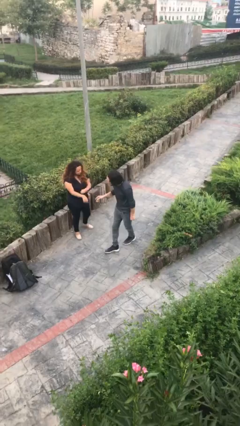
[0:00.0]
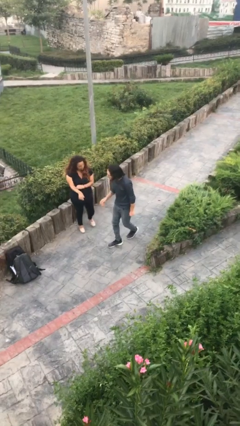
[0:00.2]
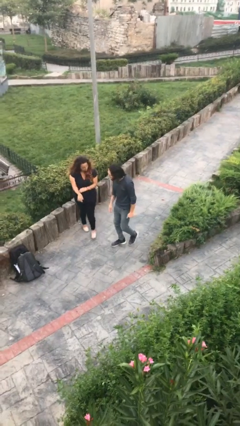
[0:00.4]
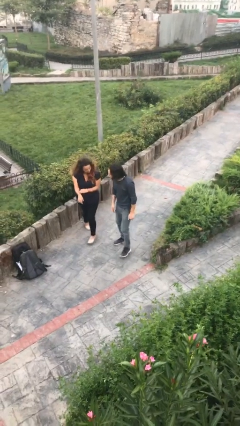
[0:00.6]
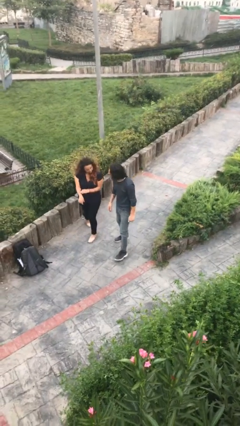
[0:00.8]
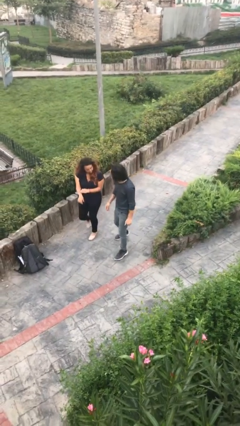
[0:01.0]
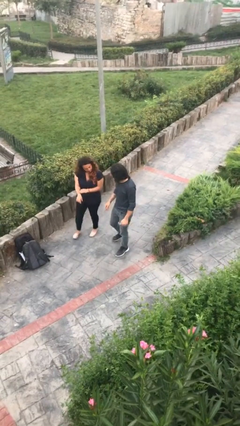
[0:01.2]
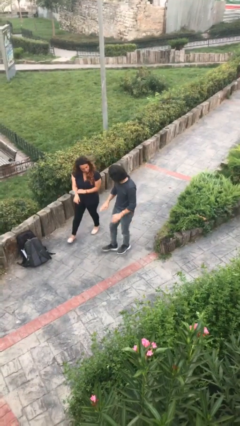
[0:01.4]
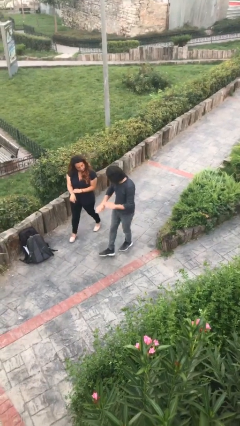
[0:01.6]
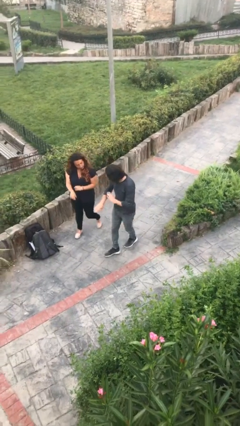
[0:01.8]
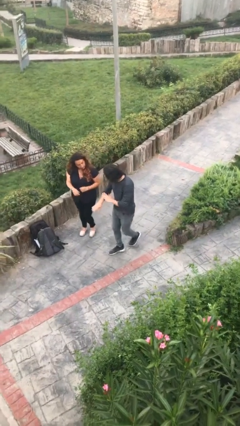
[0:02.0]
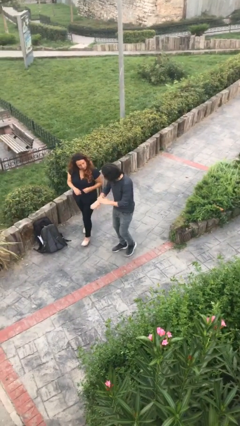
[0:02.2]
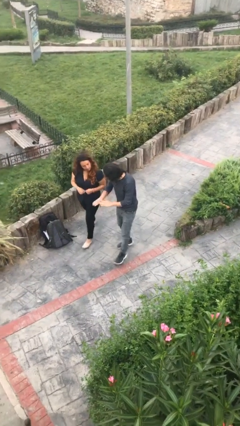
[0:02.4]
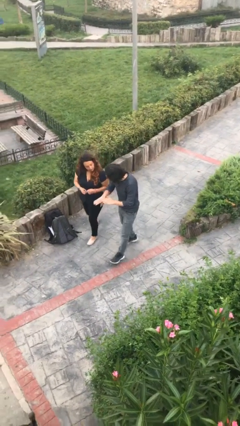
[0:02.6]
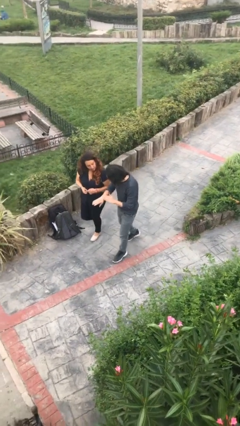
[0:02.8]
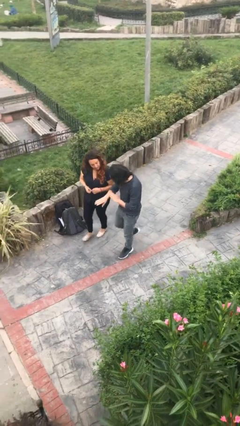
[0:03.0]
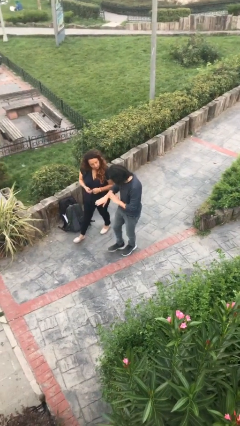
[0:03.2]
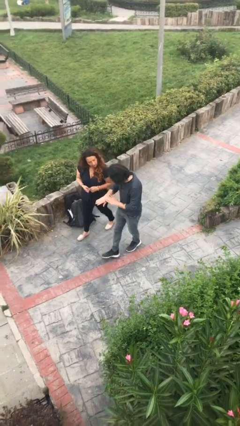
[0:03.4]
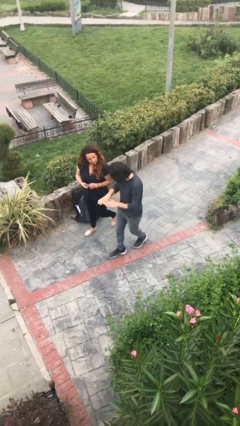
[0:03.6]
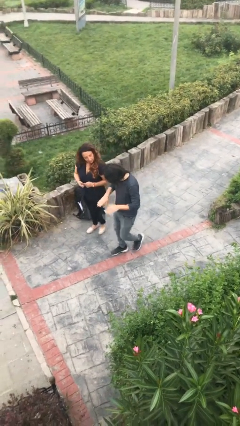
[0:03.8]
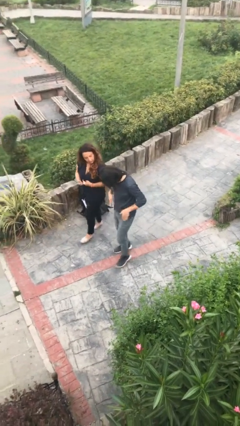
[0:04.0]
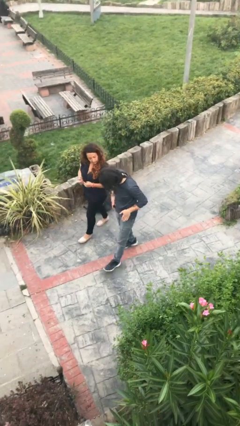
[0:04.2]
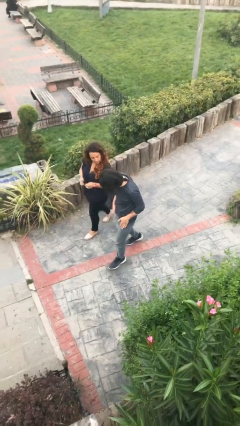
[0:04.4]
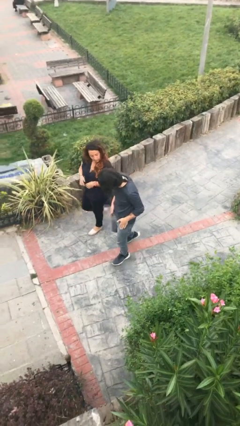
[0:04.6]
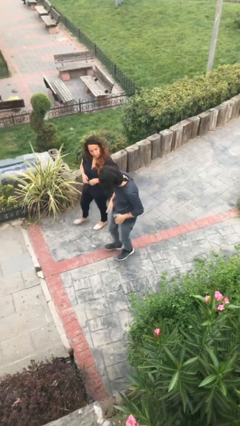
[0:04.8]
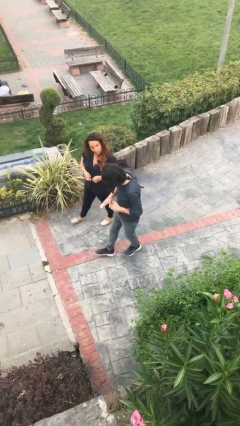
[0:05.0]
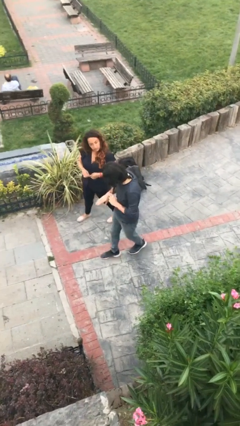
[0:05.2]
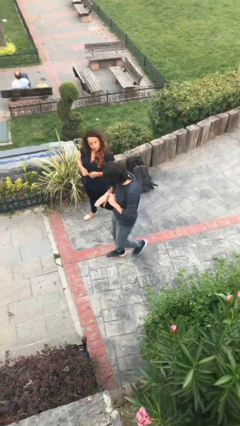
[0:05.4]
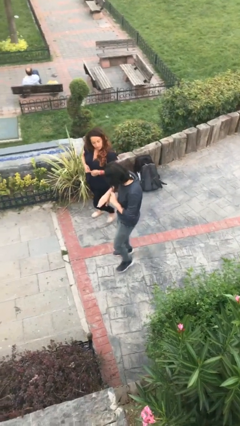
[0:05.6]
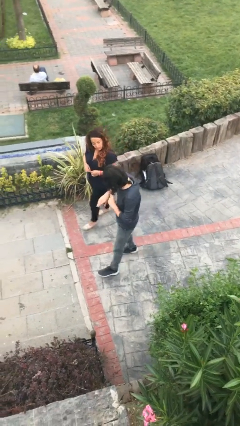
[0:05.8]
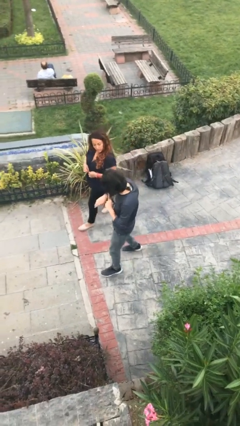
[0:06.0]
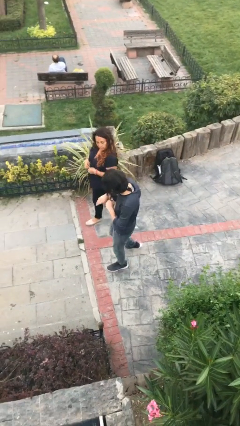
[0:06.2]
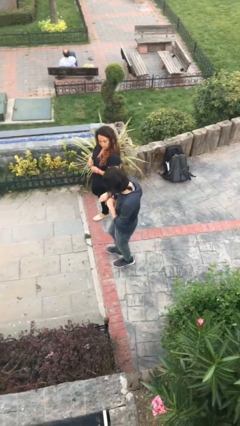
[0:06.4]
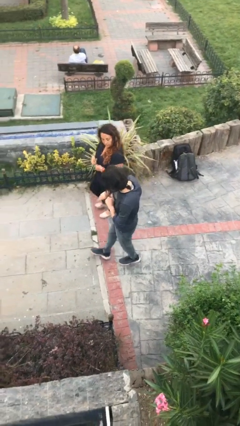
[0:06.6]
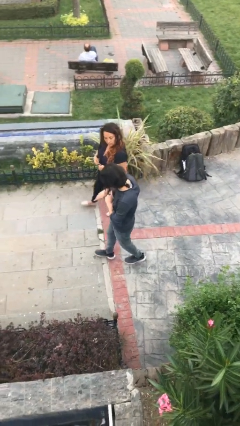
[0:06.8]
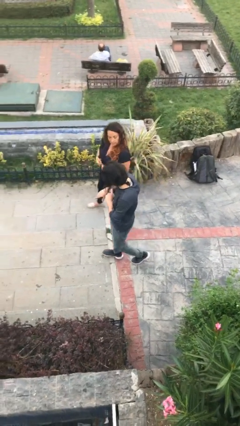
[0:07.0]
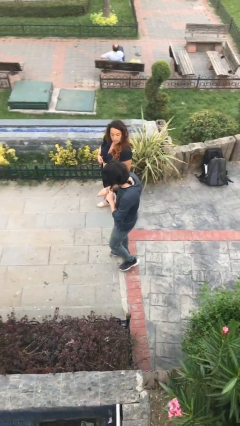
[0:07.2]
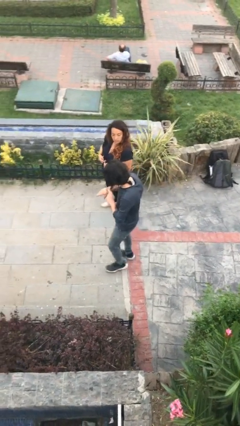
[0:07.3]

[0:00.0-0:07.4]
person talks to person

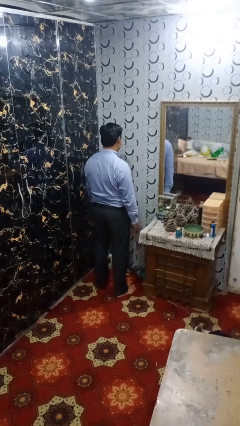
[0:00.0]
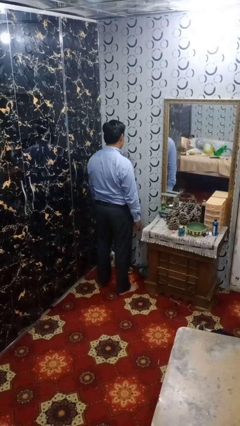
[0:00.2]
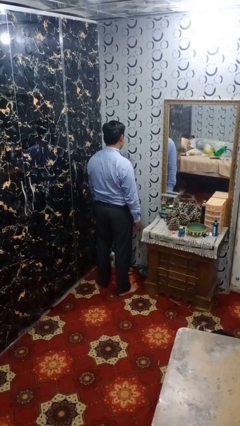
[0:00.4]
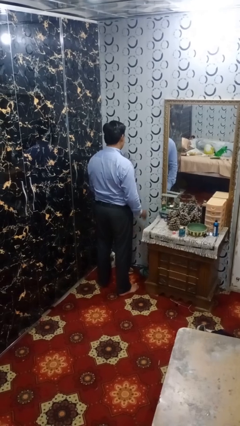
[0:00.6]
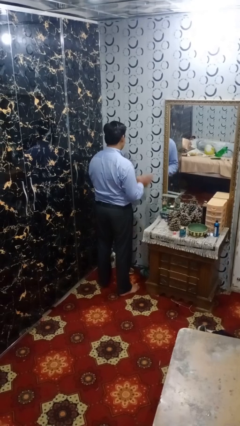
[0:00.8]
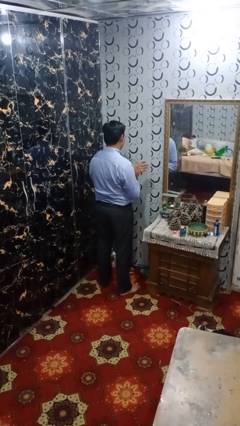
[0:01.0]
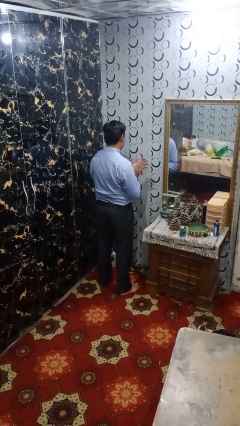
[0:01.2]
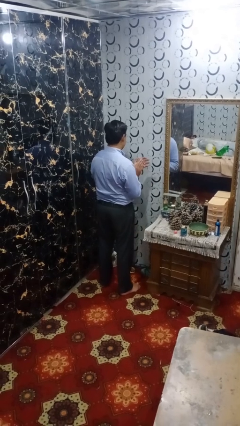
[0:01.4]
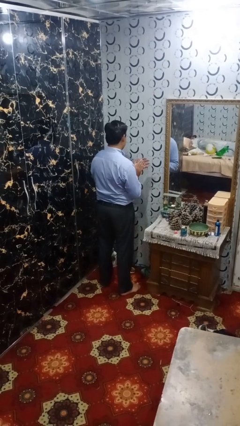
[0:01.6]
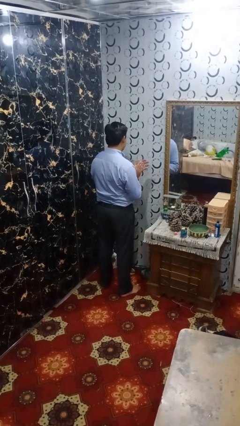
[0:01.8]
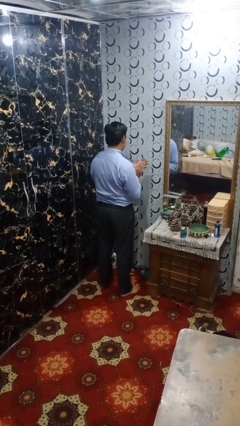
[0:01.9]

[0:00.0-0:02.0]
person claps hands

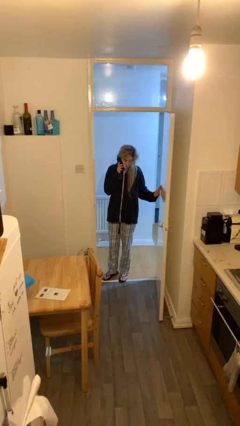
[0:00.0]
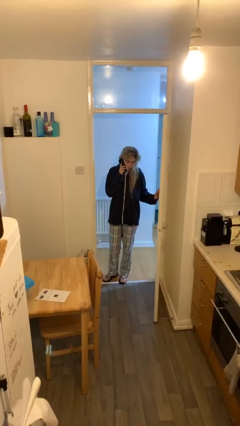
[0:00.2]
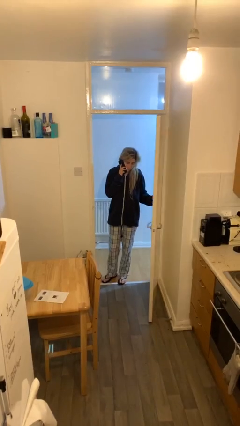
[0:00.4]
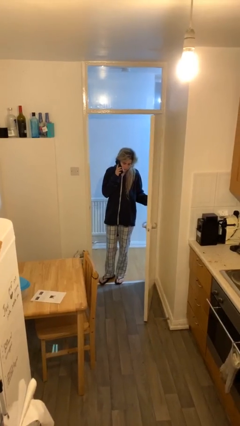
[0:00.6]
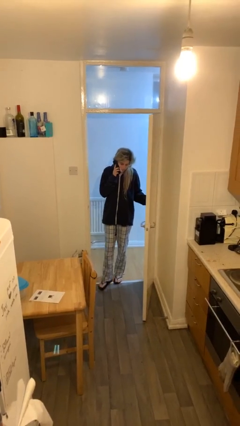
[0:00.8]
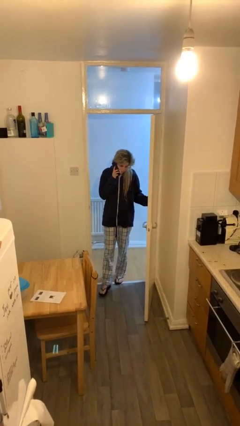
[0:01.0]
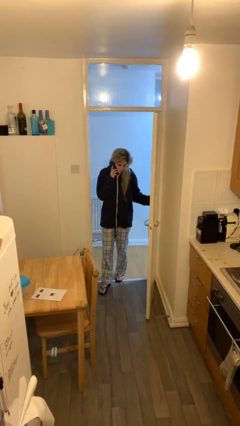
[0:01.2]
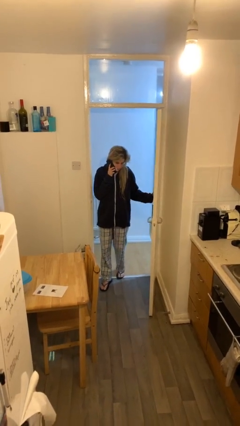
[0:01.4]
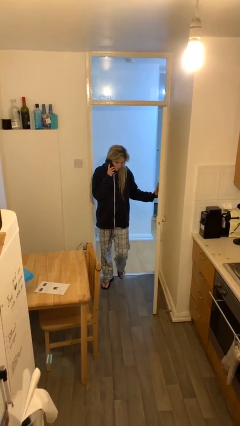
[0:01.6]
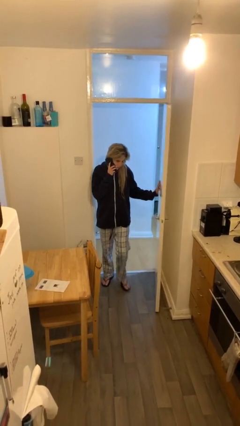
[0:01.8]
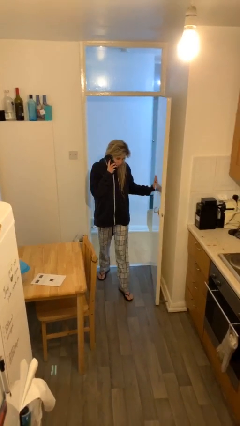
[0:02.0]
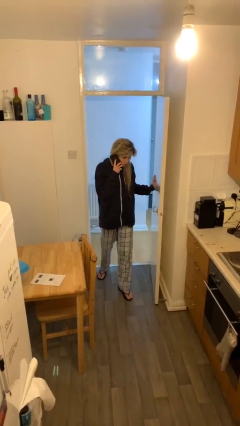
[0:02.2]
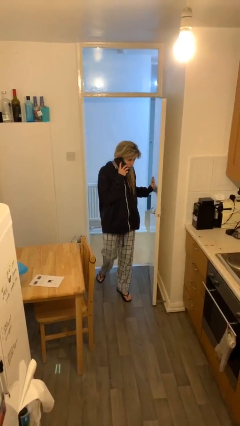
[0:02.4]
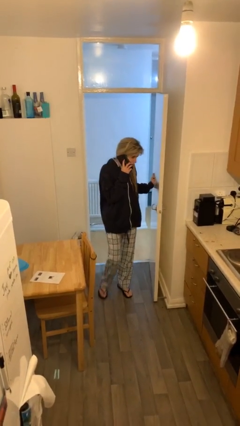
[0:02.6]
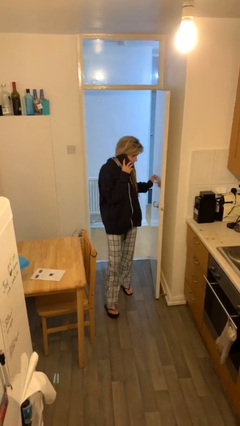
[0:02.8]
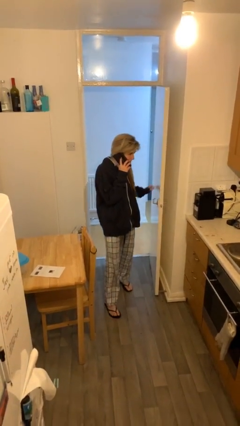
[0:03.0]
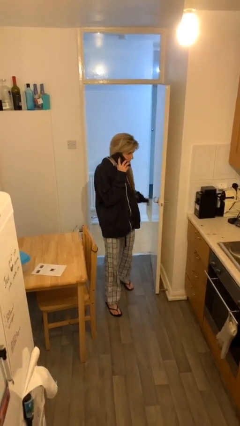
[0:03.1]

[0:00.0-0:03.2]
person enters scene through structure

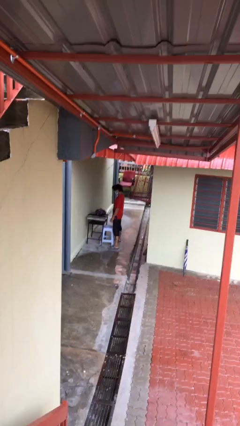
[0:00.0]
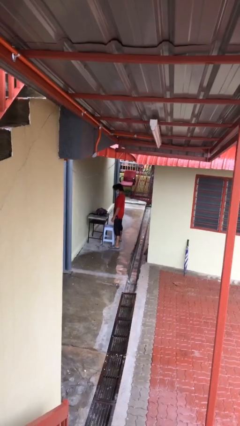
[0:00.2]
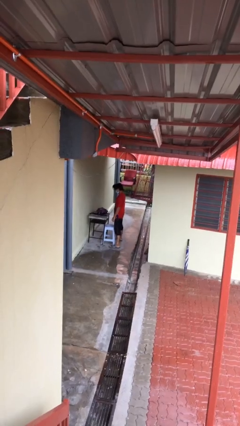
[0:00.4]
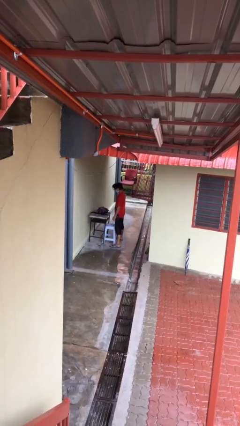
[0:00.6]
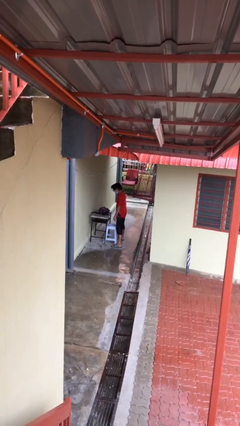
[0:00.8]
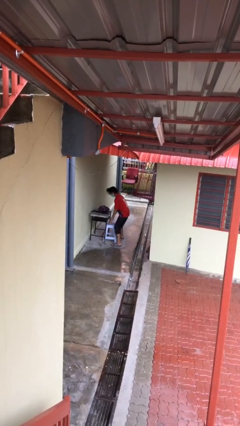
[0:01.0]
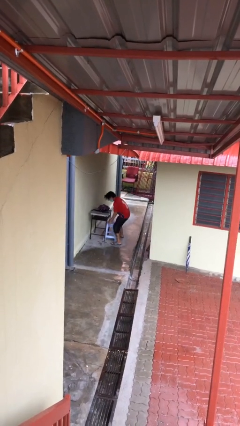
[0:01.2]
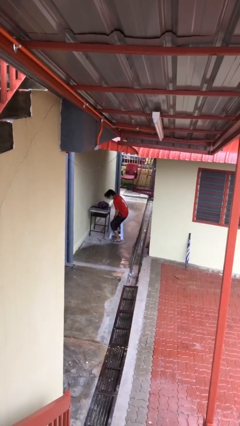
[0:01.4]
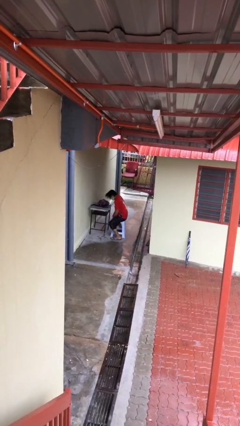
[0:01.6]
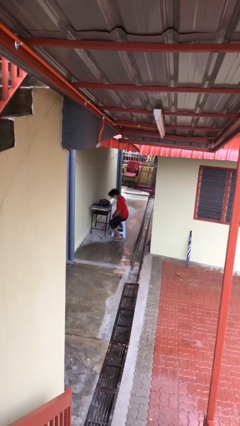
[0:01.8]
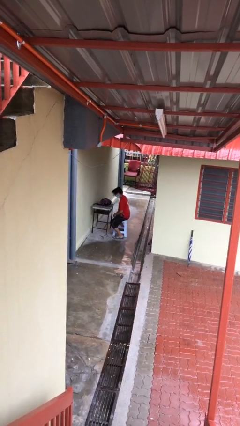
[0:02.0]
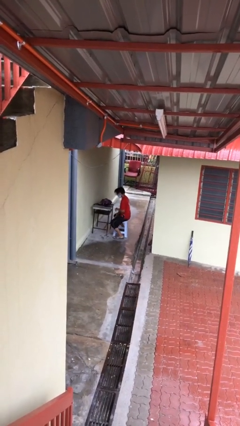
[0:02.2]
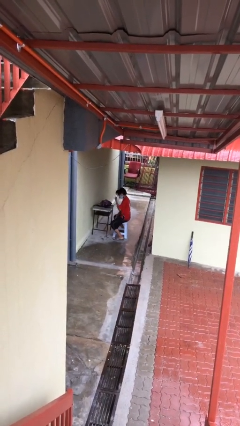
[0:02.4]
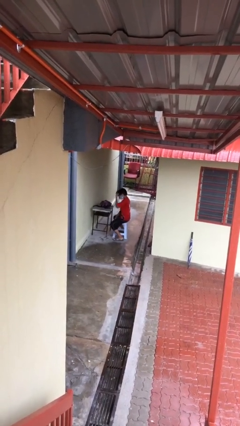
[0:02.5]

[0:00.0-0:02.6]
person sits down

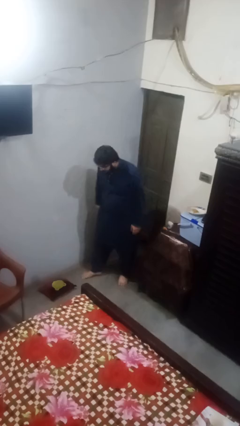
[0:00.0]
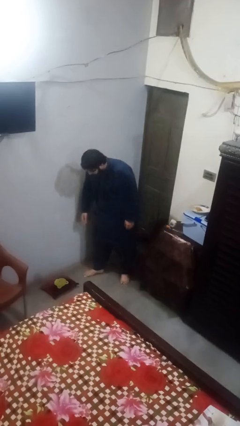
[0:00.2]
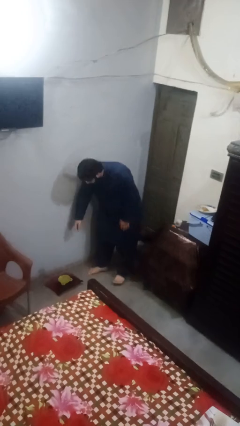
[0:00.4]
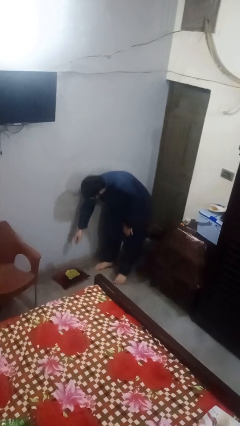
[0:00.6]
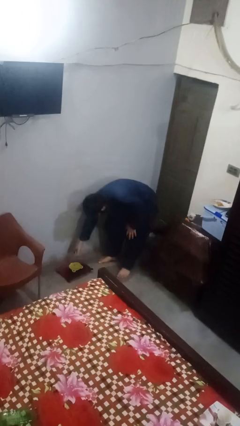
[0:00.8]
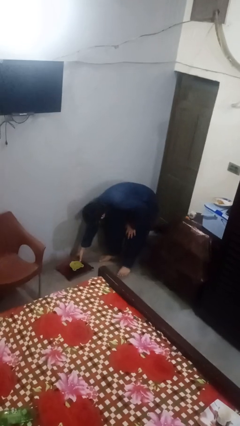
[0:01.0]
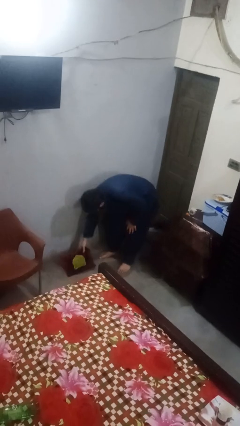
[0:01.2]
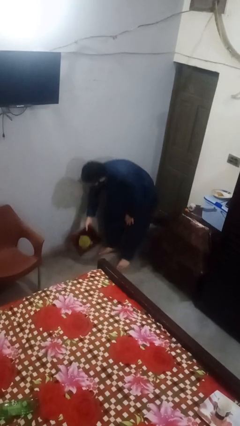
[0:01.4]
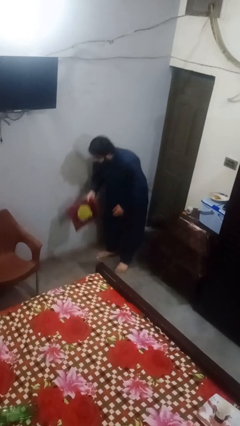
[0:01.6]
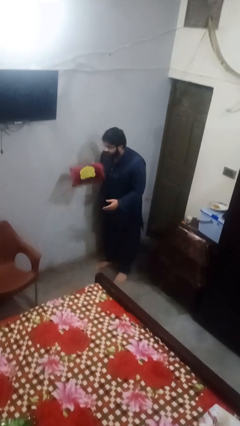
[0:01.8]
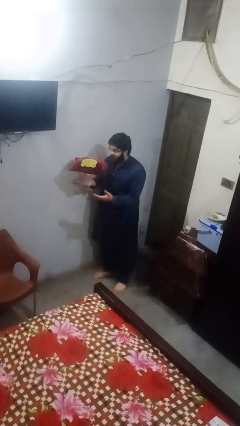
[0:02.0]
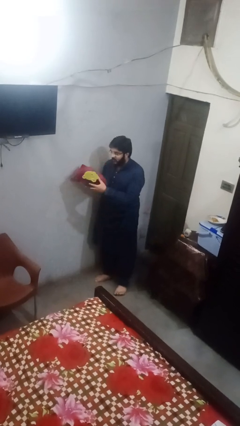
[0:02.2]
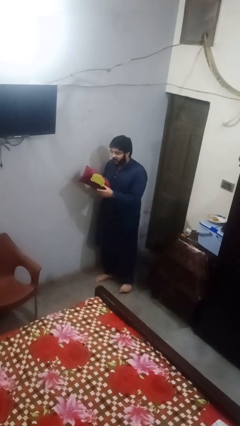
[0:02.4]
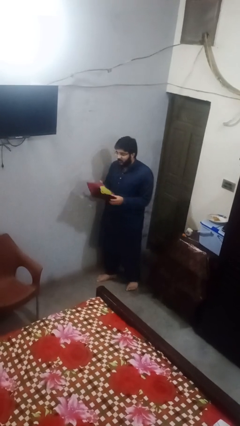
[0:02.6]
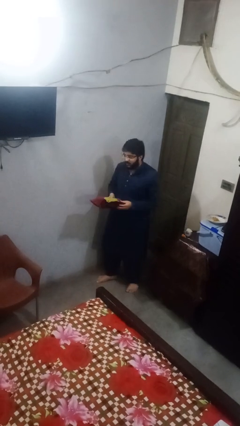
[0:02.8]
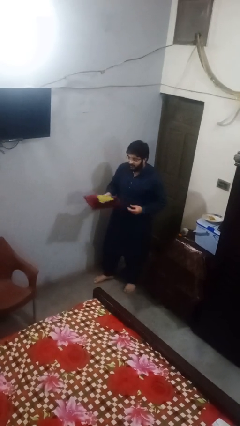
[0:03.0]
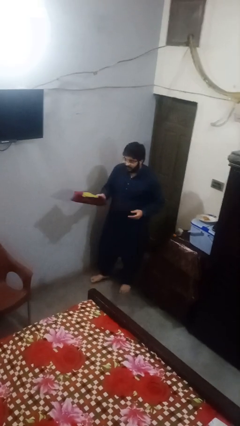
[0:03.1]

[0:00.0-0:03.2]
person picks up object from floor
